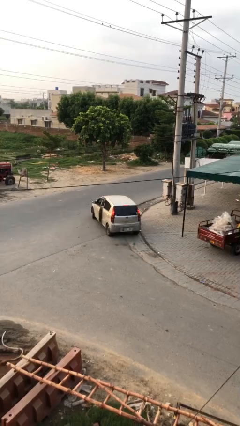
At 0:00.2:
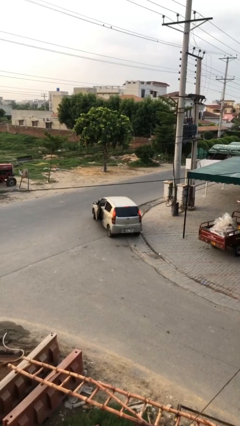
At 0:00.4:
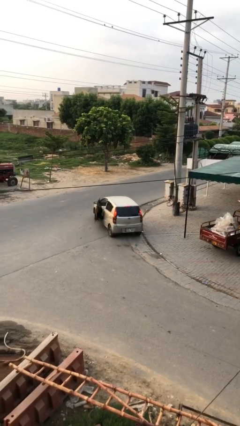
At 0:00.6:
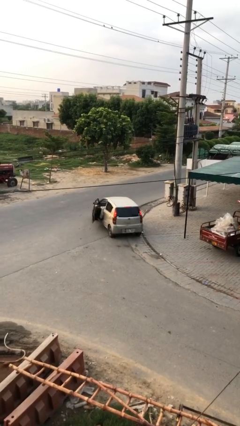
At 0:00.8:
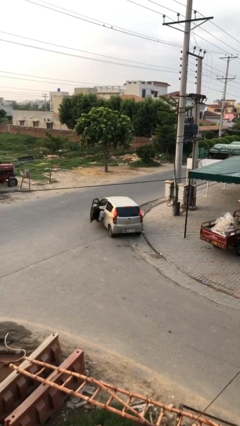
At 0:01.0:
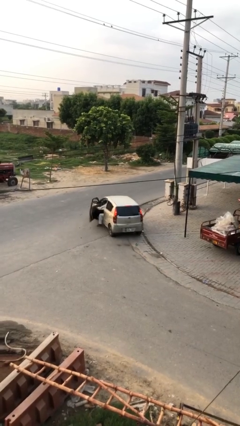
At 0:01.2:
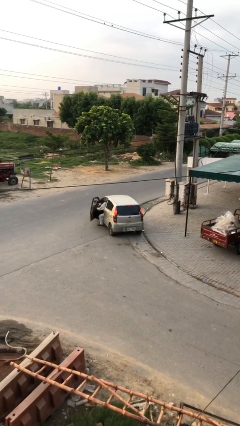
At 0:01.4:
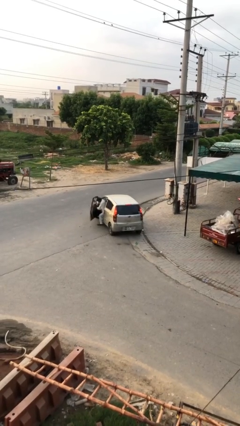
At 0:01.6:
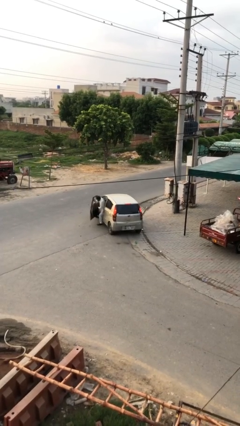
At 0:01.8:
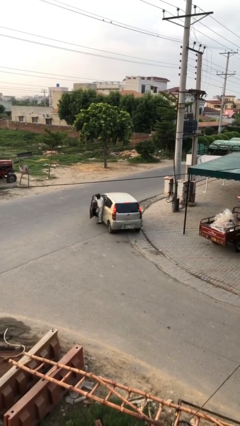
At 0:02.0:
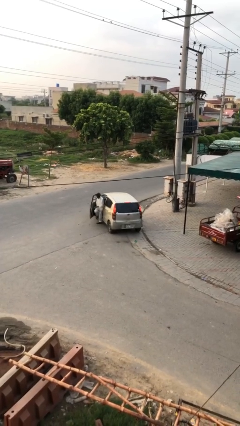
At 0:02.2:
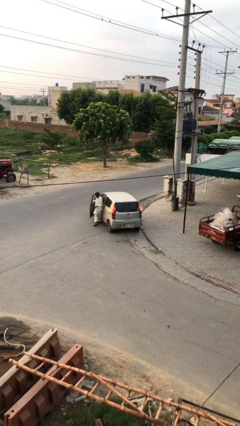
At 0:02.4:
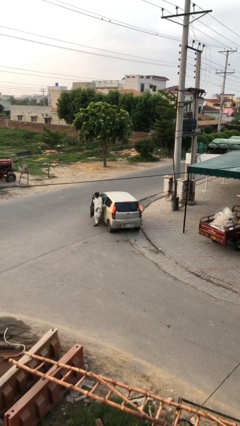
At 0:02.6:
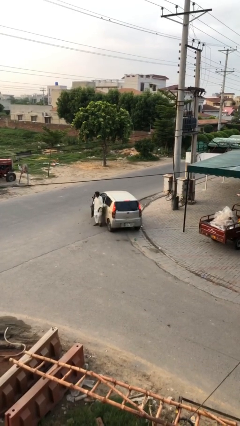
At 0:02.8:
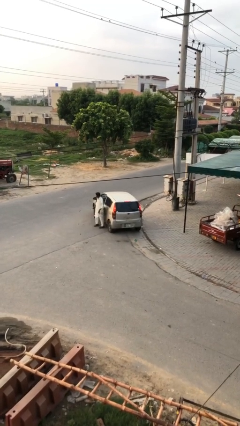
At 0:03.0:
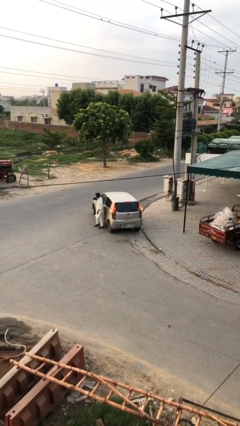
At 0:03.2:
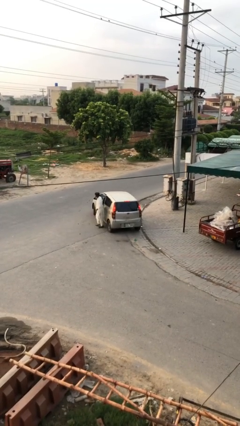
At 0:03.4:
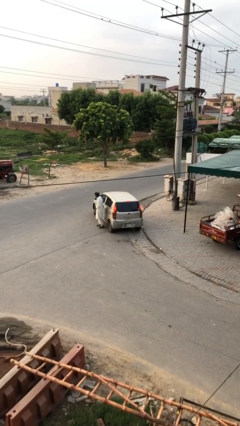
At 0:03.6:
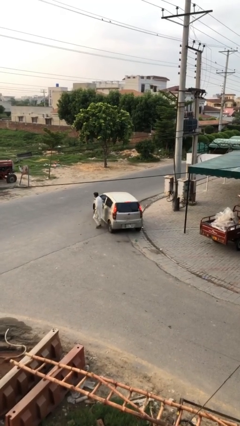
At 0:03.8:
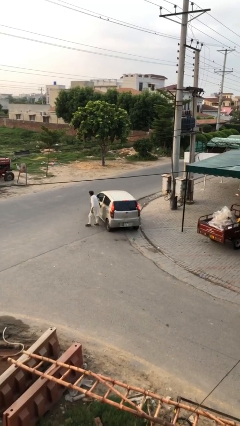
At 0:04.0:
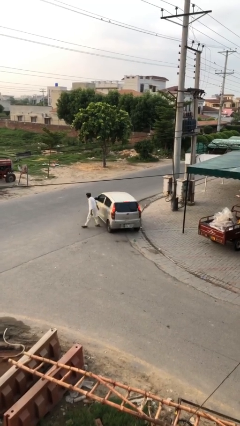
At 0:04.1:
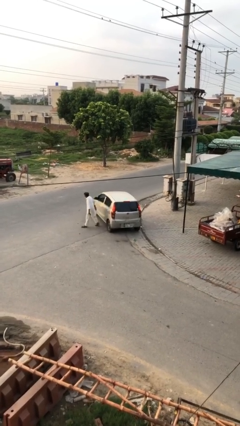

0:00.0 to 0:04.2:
car drops off person

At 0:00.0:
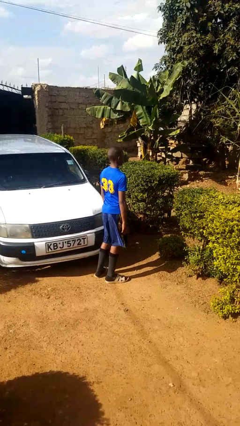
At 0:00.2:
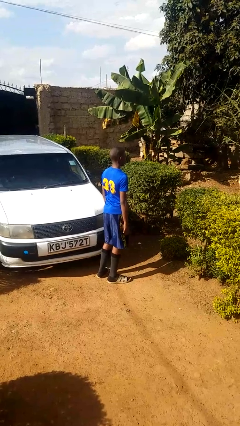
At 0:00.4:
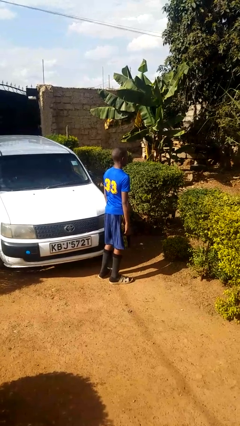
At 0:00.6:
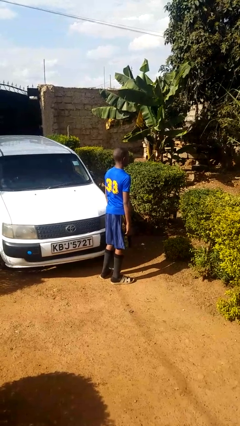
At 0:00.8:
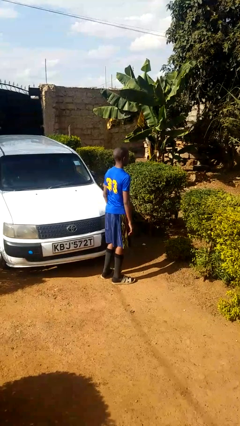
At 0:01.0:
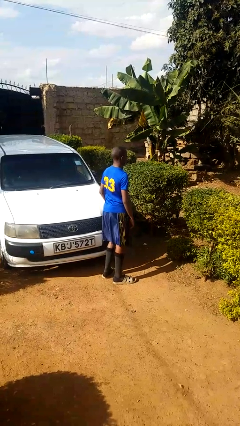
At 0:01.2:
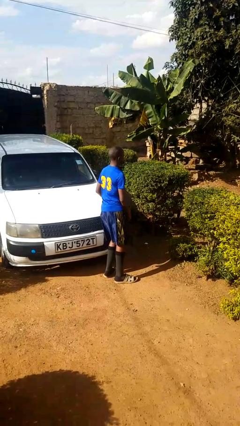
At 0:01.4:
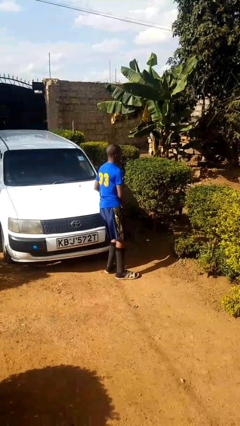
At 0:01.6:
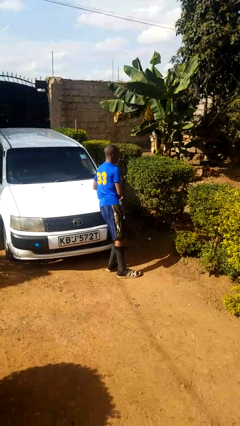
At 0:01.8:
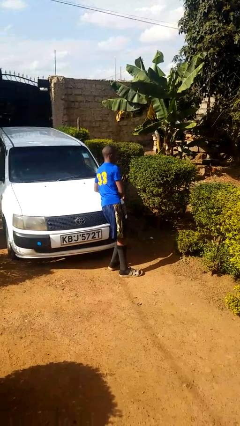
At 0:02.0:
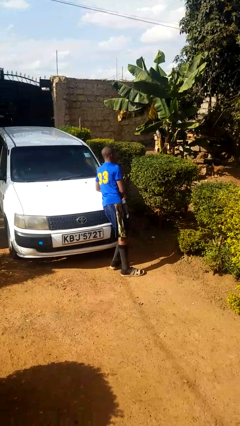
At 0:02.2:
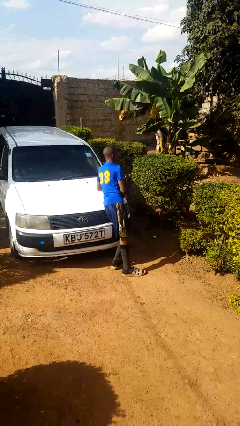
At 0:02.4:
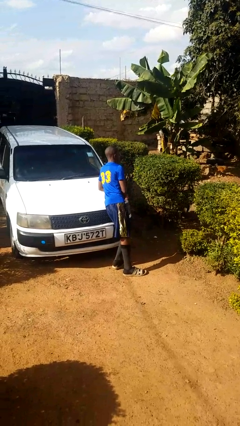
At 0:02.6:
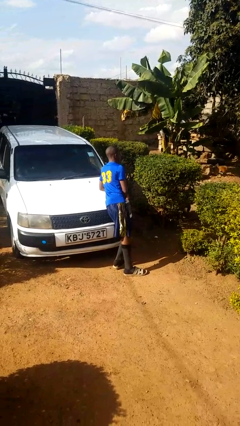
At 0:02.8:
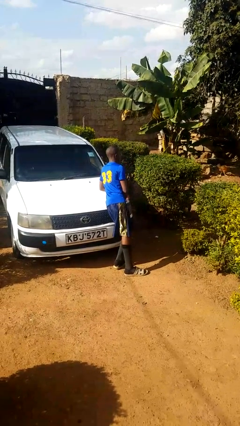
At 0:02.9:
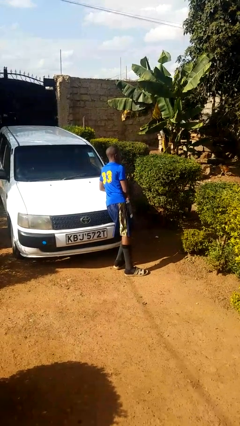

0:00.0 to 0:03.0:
person leans against car

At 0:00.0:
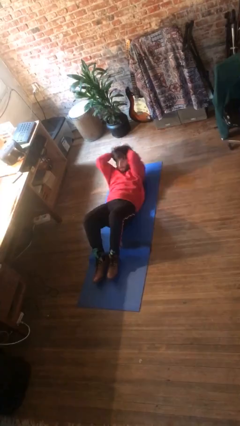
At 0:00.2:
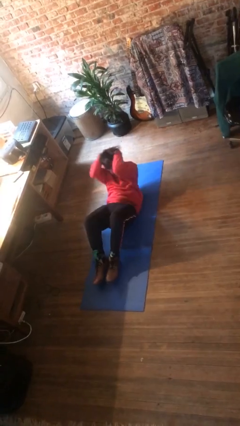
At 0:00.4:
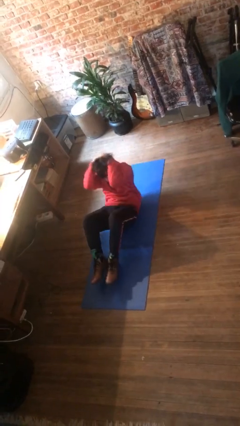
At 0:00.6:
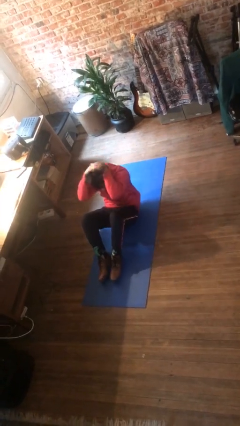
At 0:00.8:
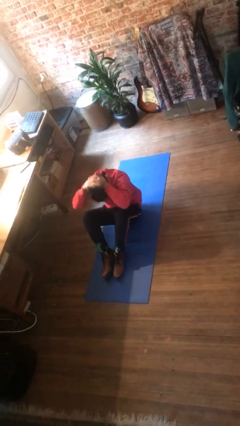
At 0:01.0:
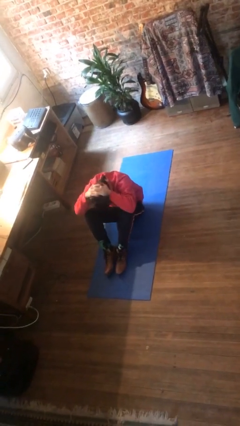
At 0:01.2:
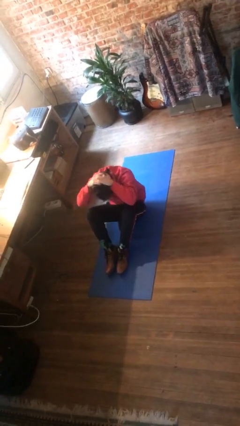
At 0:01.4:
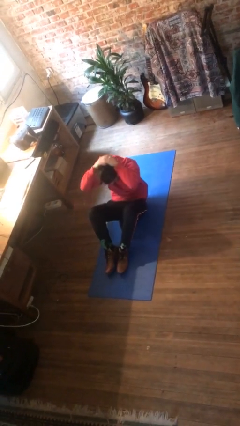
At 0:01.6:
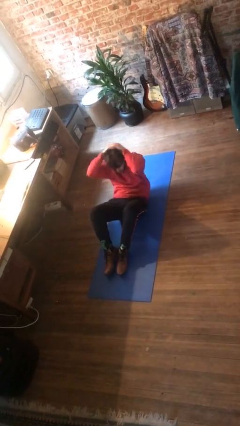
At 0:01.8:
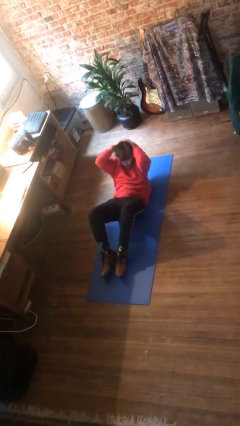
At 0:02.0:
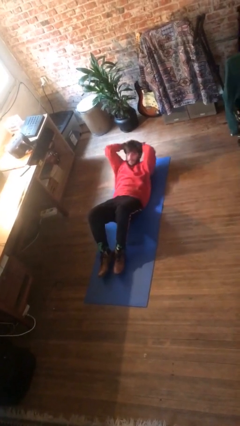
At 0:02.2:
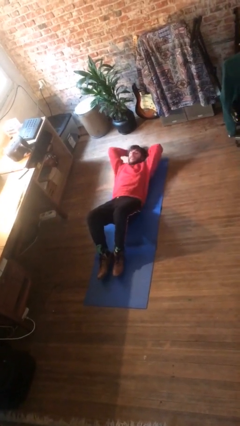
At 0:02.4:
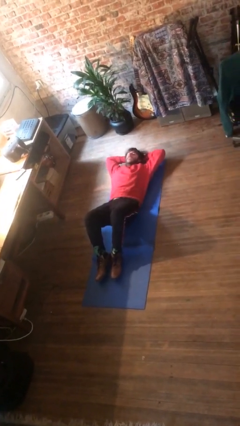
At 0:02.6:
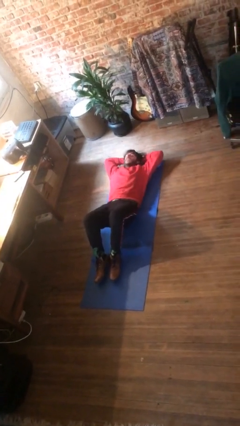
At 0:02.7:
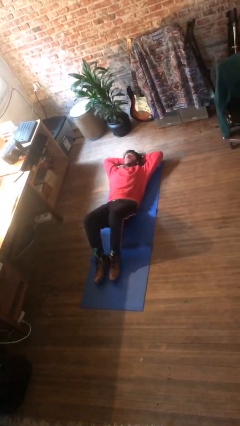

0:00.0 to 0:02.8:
person exercises with situp

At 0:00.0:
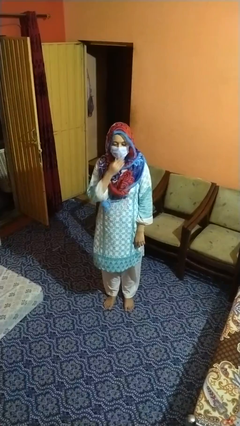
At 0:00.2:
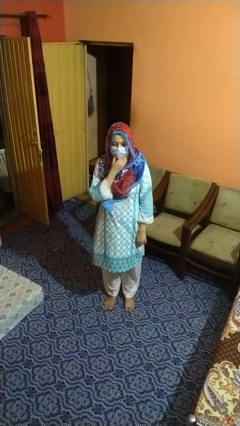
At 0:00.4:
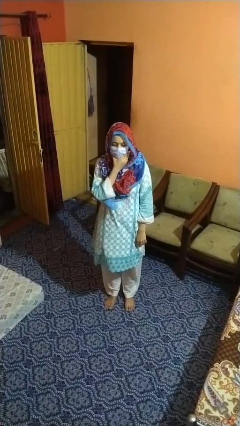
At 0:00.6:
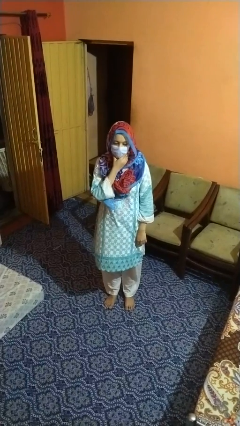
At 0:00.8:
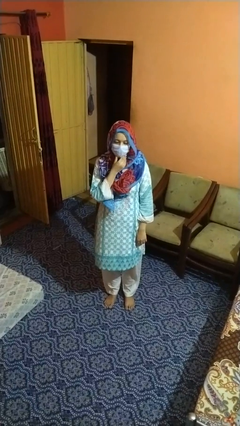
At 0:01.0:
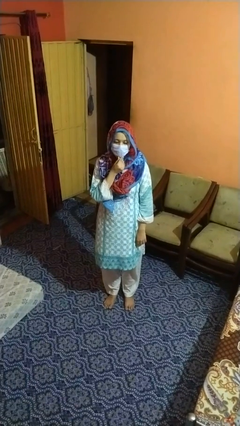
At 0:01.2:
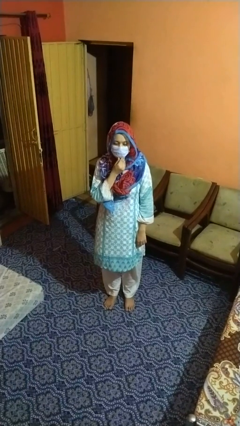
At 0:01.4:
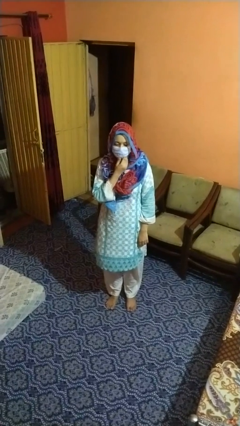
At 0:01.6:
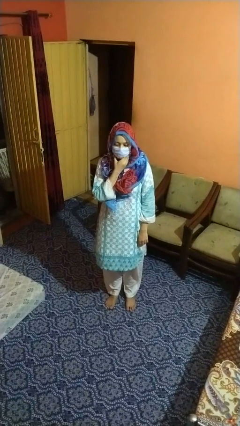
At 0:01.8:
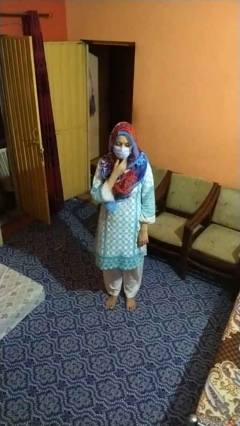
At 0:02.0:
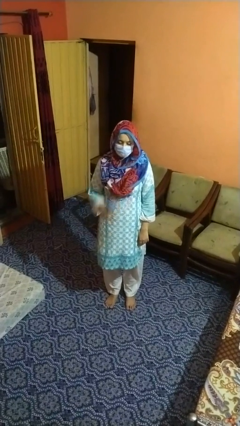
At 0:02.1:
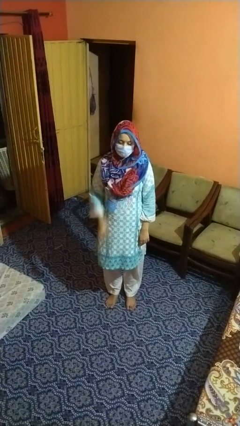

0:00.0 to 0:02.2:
person strokes chin

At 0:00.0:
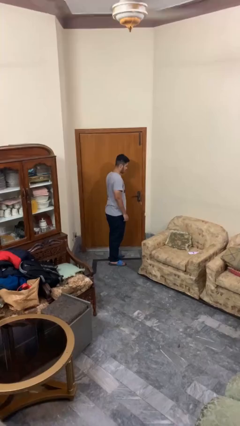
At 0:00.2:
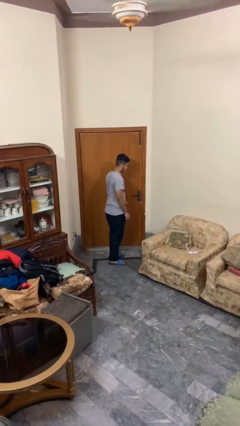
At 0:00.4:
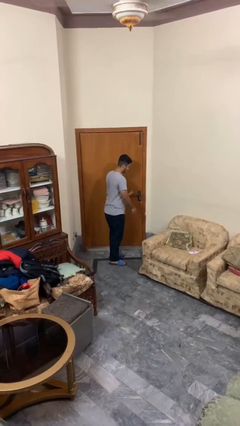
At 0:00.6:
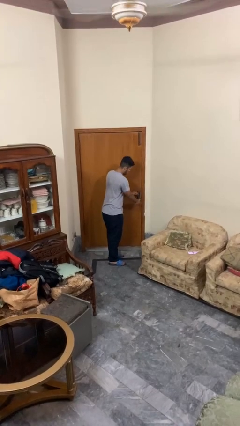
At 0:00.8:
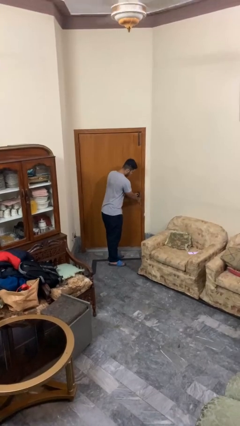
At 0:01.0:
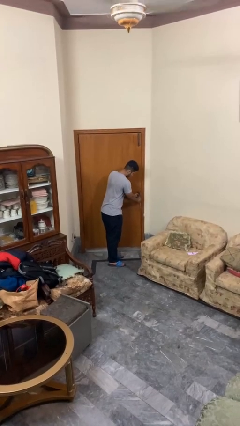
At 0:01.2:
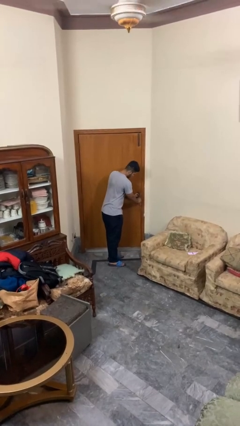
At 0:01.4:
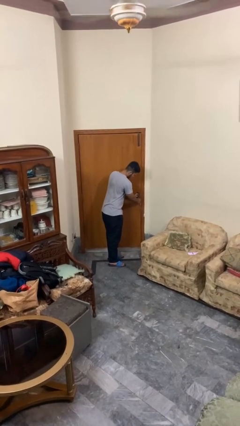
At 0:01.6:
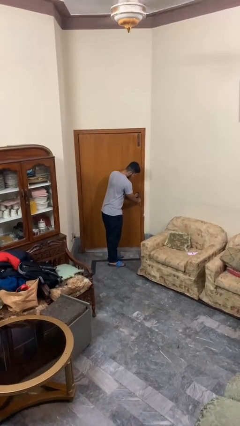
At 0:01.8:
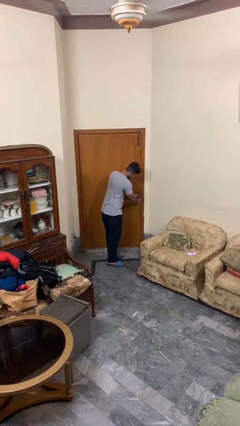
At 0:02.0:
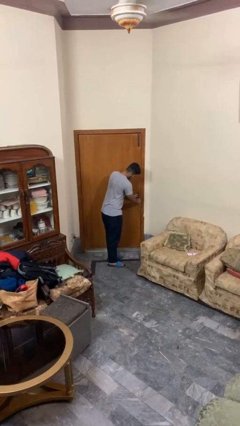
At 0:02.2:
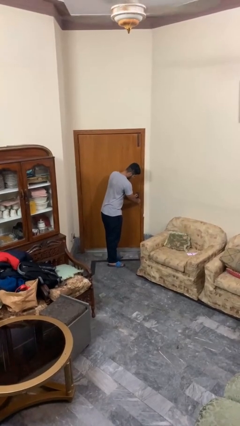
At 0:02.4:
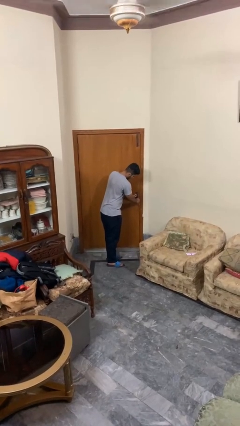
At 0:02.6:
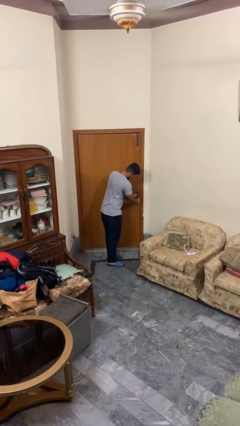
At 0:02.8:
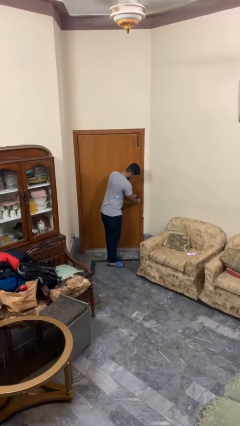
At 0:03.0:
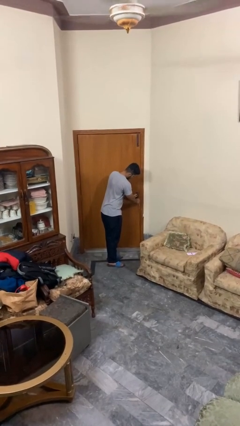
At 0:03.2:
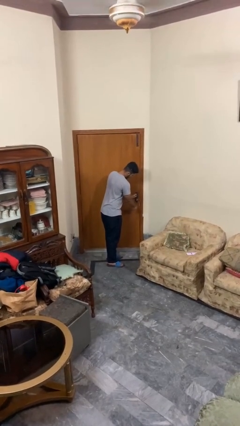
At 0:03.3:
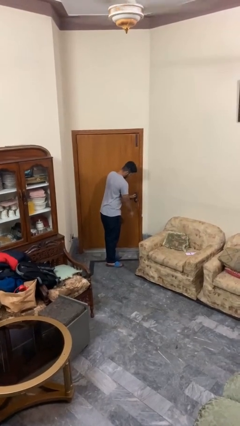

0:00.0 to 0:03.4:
person unlocks door with keys

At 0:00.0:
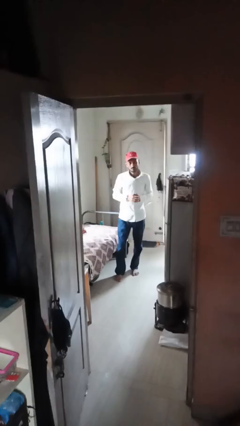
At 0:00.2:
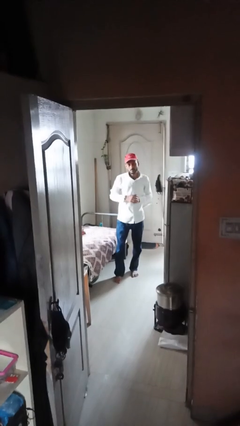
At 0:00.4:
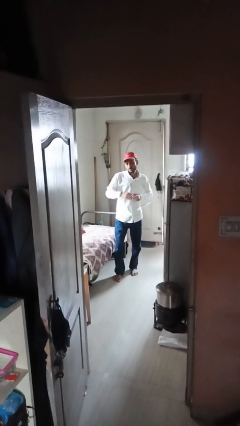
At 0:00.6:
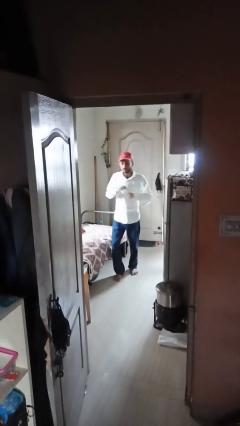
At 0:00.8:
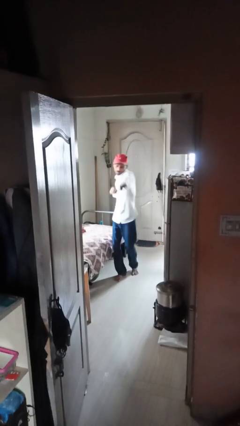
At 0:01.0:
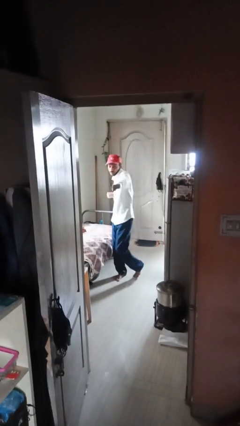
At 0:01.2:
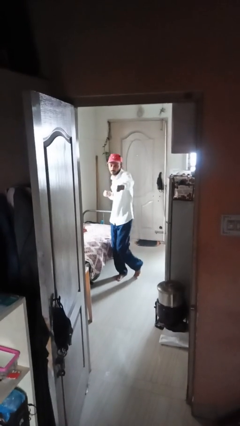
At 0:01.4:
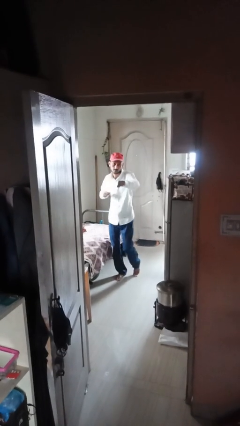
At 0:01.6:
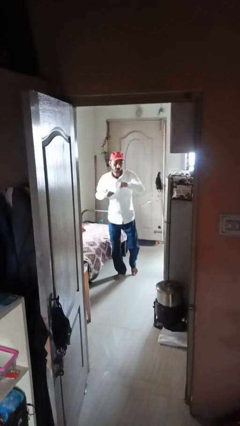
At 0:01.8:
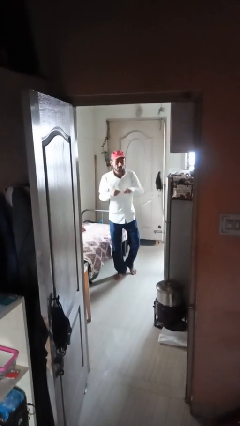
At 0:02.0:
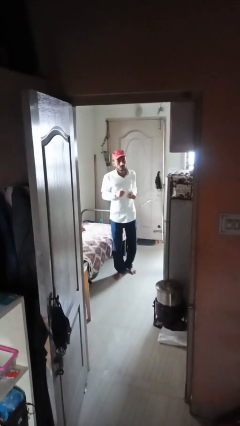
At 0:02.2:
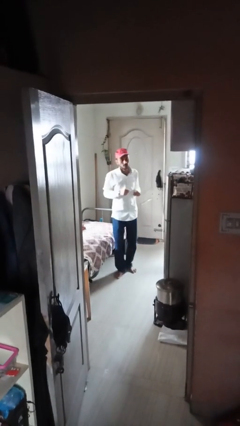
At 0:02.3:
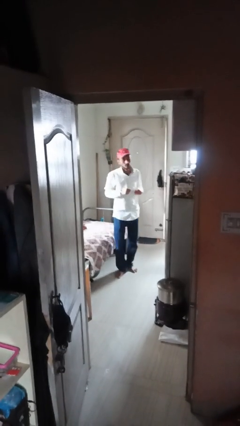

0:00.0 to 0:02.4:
person punches
